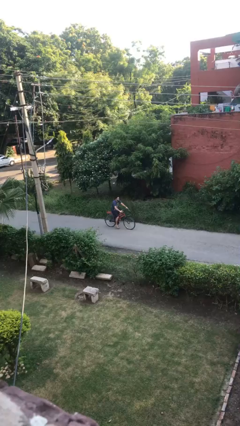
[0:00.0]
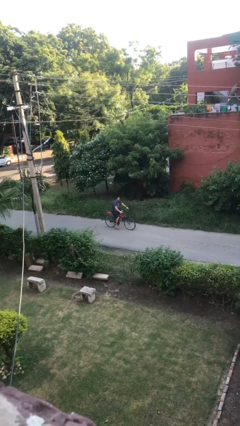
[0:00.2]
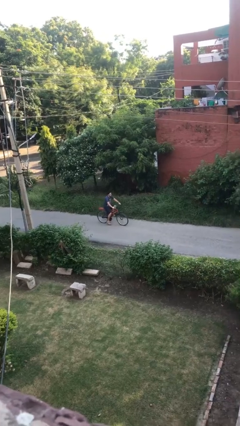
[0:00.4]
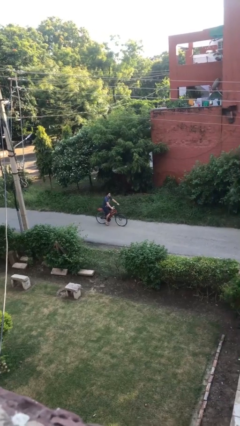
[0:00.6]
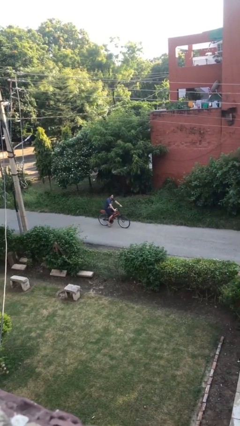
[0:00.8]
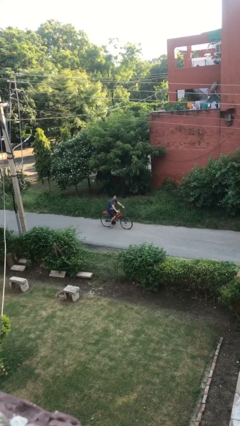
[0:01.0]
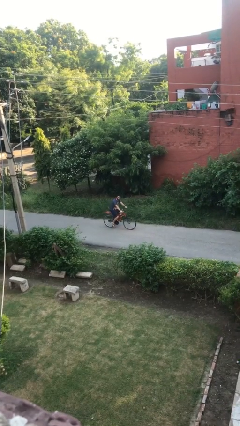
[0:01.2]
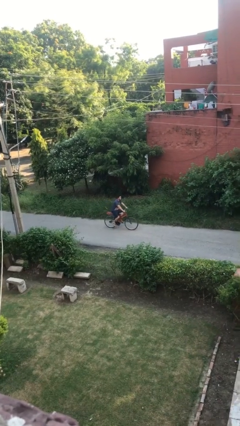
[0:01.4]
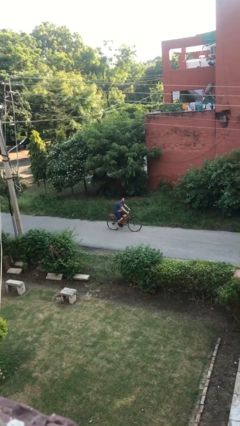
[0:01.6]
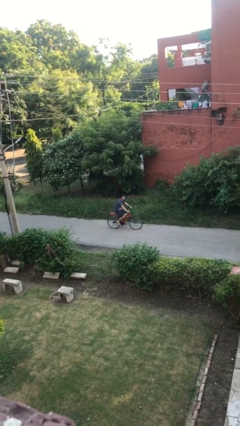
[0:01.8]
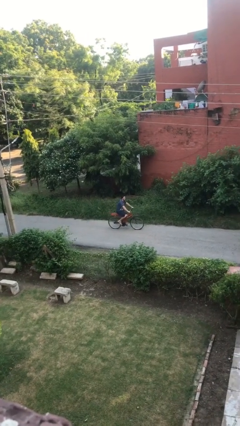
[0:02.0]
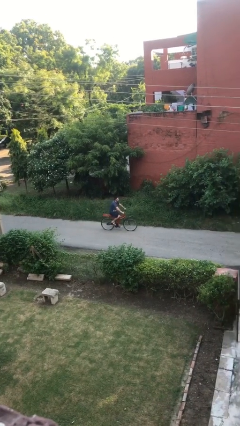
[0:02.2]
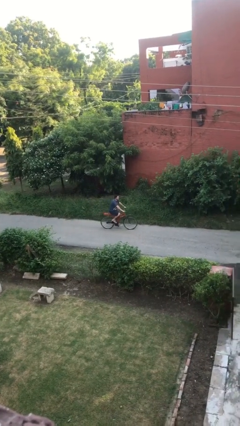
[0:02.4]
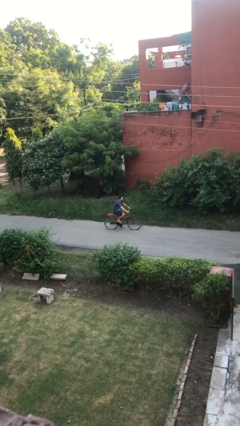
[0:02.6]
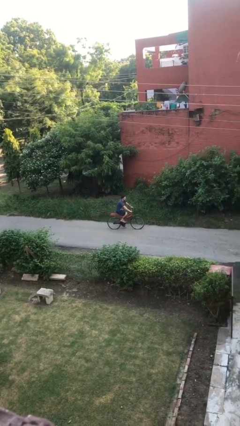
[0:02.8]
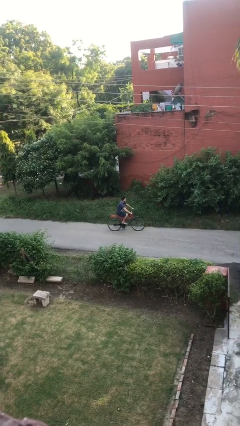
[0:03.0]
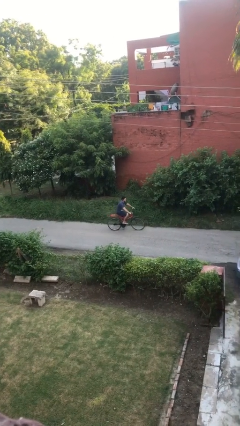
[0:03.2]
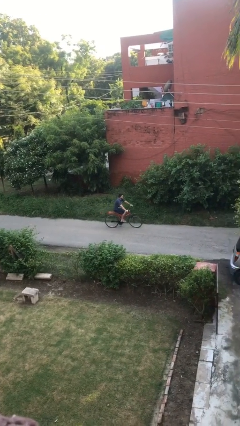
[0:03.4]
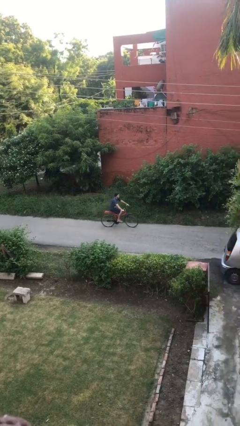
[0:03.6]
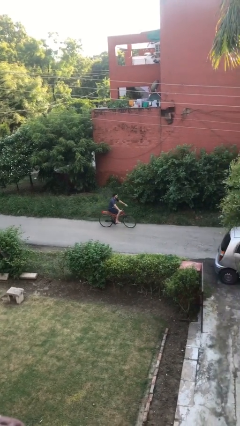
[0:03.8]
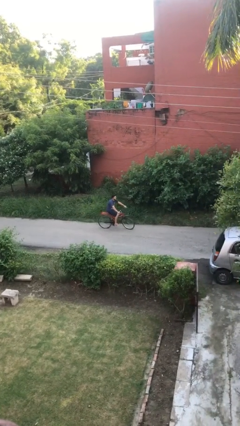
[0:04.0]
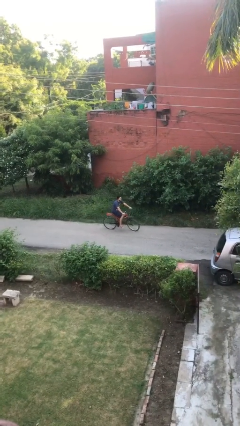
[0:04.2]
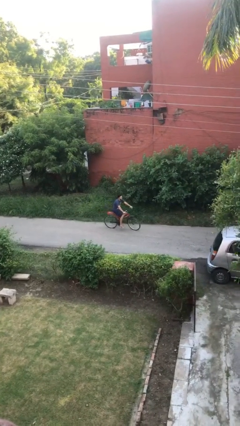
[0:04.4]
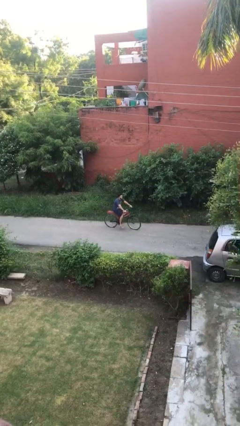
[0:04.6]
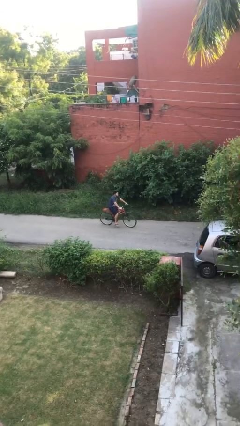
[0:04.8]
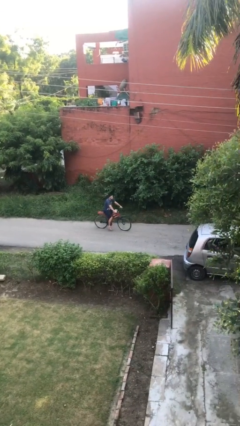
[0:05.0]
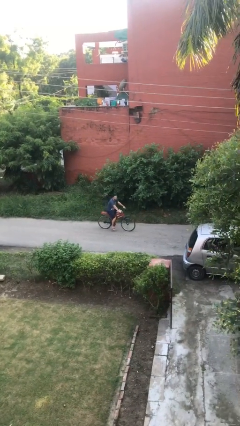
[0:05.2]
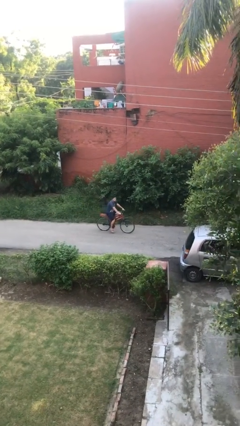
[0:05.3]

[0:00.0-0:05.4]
person rides bicycle

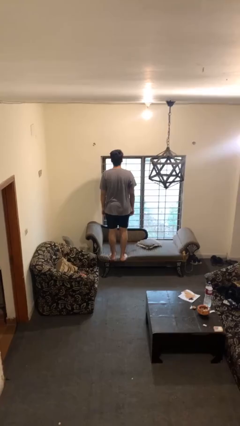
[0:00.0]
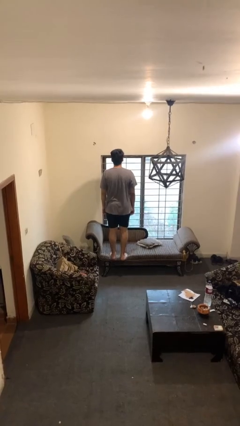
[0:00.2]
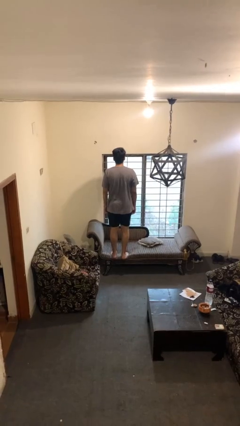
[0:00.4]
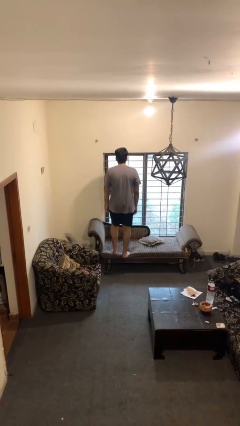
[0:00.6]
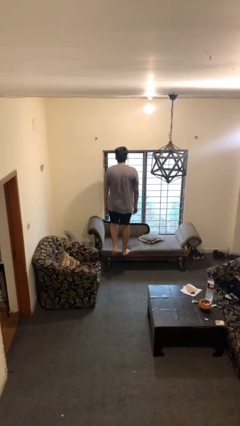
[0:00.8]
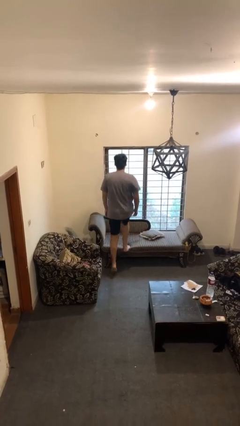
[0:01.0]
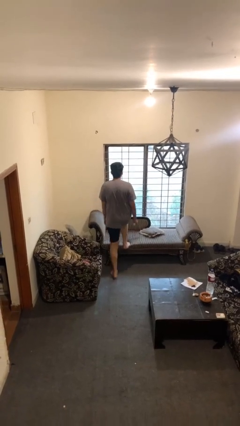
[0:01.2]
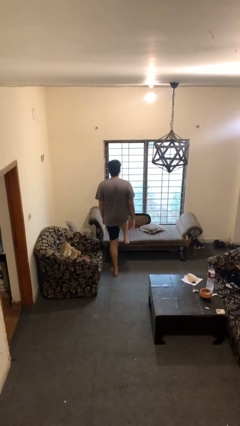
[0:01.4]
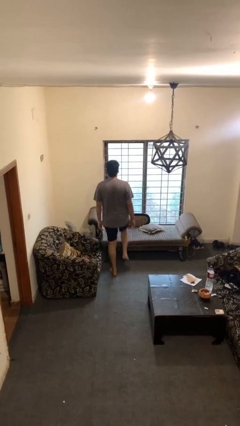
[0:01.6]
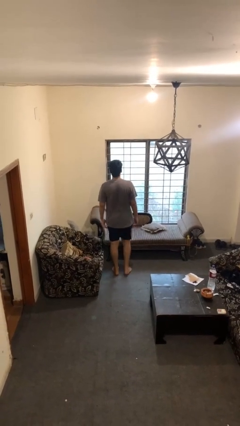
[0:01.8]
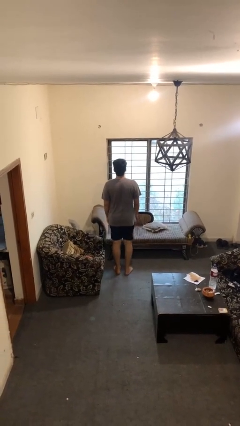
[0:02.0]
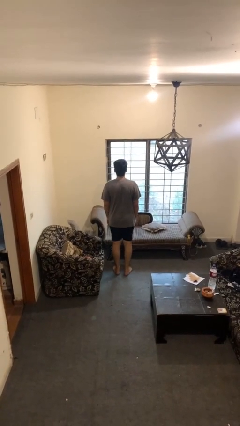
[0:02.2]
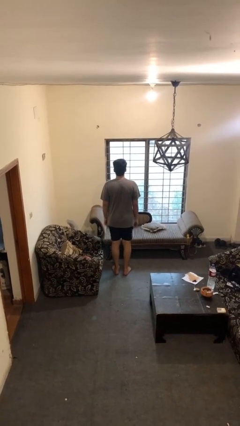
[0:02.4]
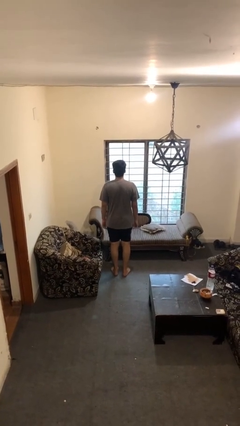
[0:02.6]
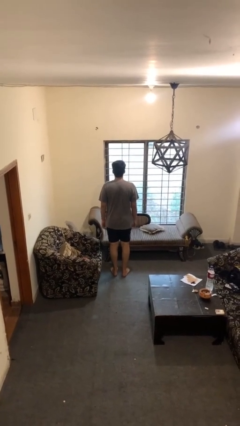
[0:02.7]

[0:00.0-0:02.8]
person climbs off couch

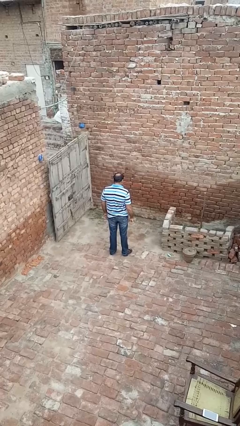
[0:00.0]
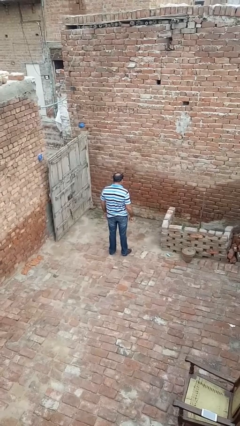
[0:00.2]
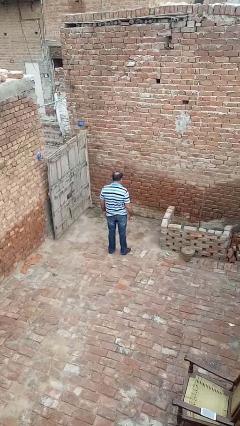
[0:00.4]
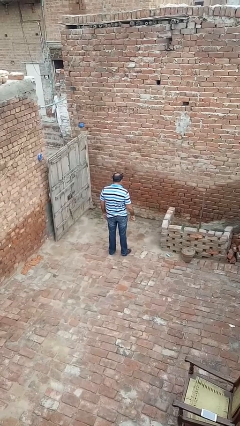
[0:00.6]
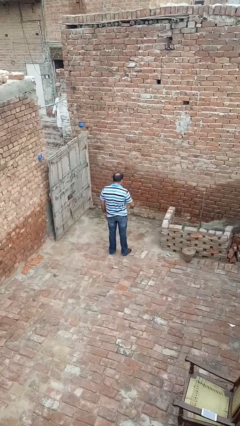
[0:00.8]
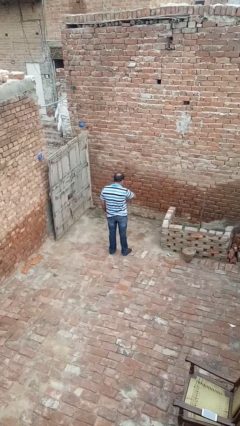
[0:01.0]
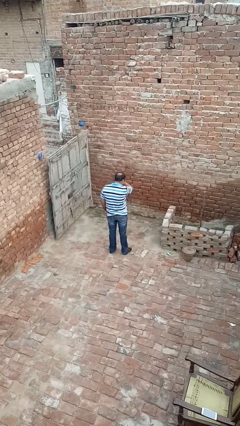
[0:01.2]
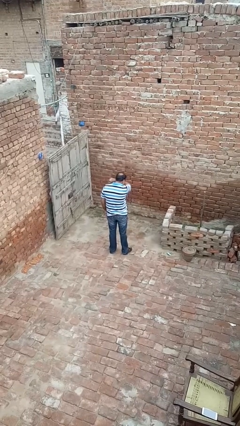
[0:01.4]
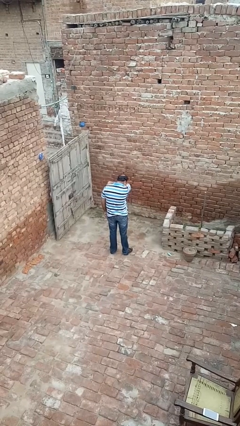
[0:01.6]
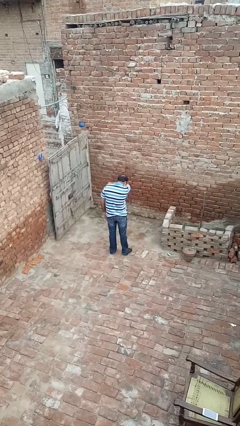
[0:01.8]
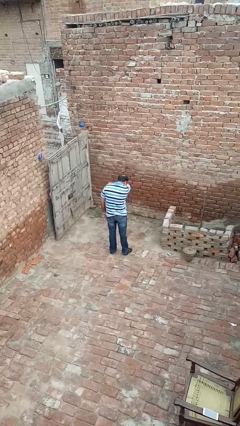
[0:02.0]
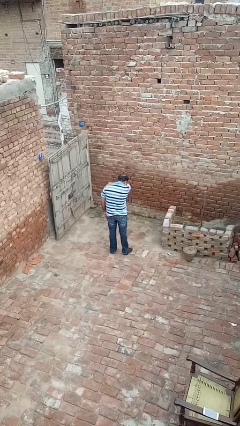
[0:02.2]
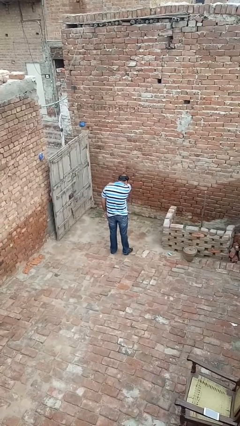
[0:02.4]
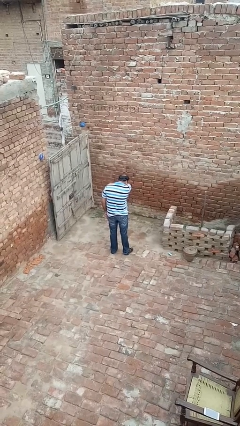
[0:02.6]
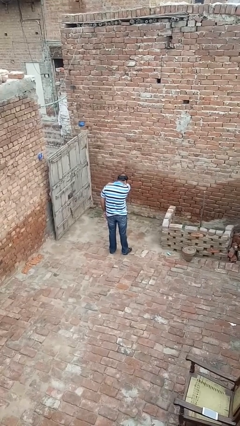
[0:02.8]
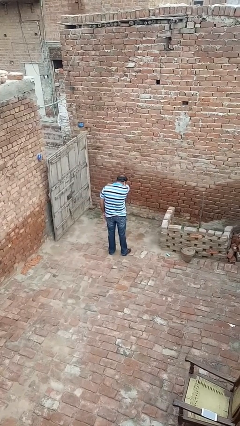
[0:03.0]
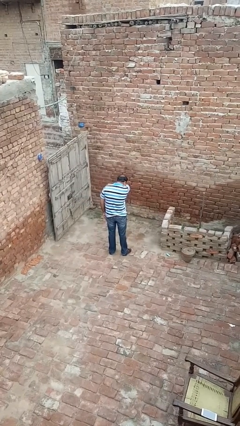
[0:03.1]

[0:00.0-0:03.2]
person sneezes into arm

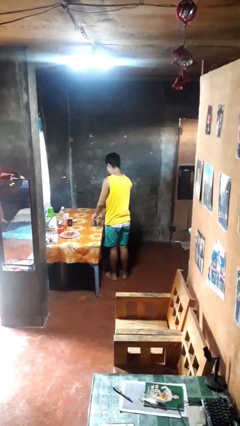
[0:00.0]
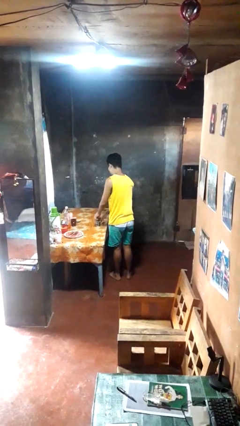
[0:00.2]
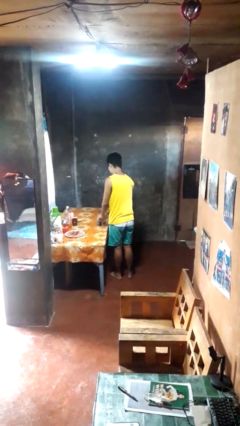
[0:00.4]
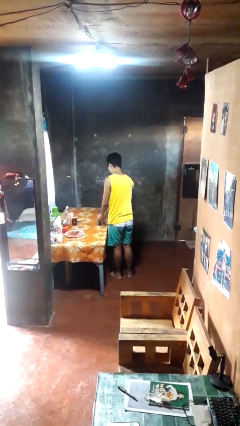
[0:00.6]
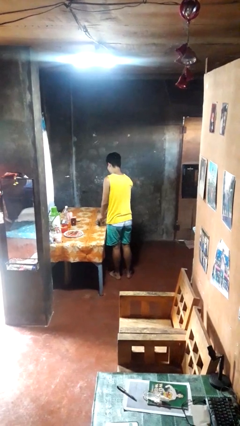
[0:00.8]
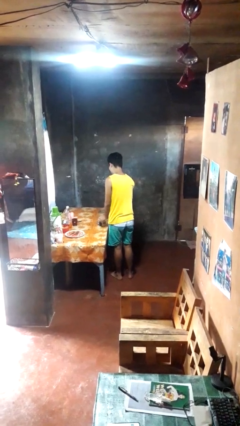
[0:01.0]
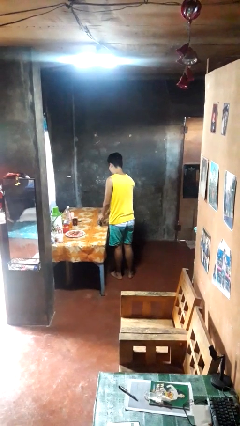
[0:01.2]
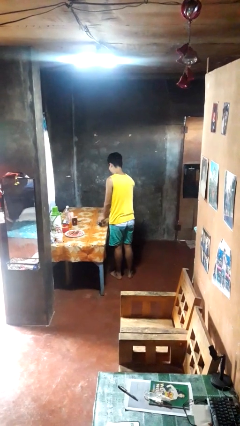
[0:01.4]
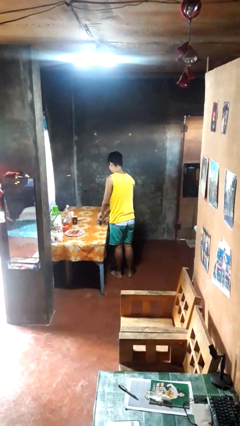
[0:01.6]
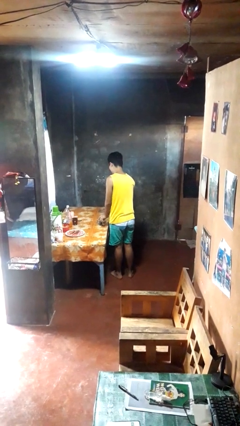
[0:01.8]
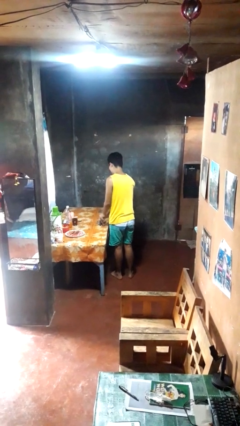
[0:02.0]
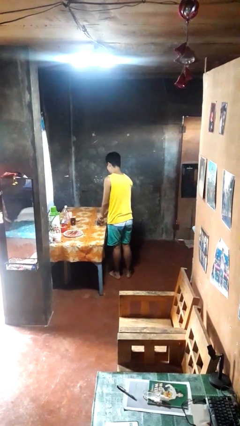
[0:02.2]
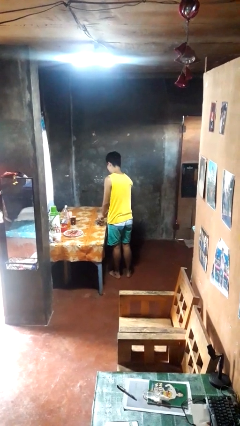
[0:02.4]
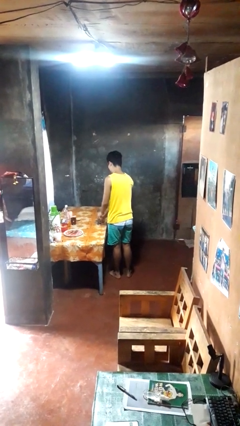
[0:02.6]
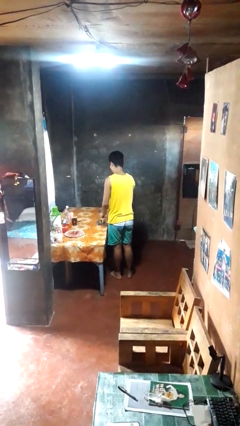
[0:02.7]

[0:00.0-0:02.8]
person opens can with can opener

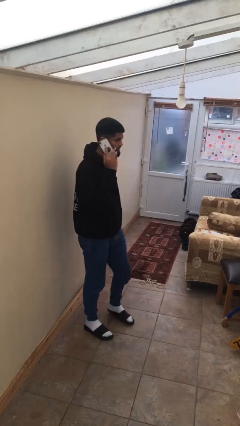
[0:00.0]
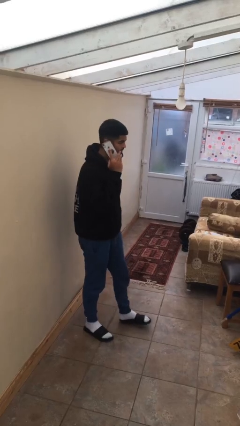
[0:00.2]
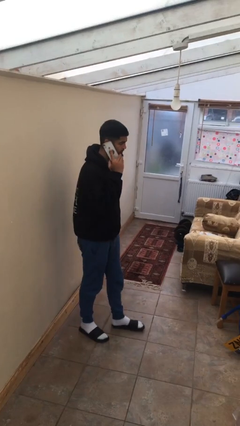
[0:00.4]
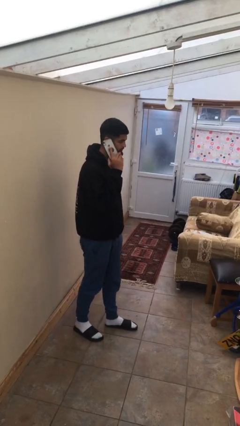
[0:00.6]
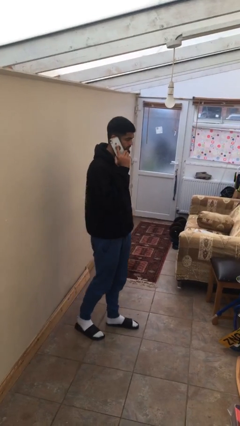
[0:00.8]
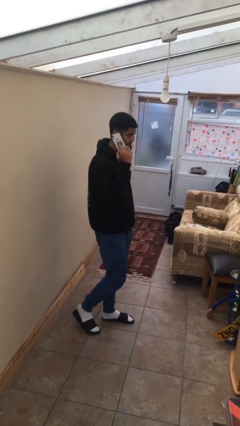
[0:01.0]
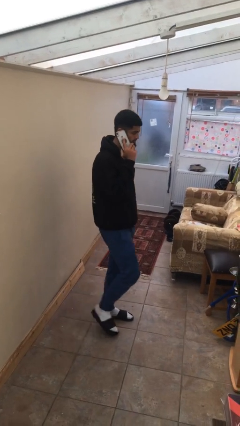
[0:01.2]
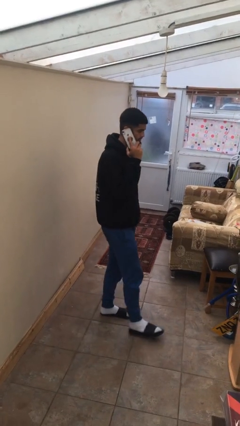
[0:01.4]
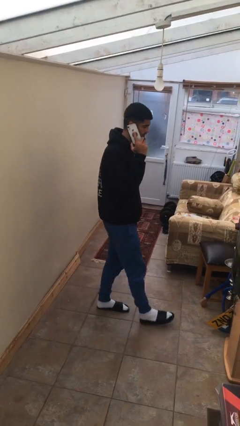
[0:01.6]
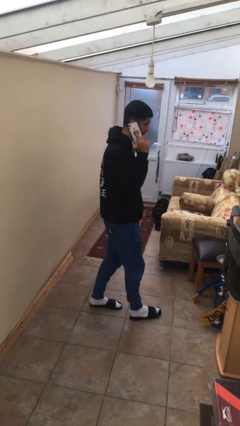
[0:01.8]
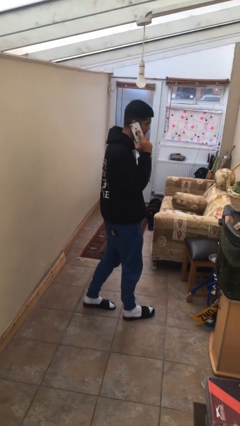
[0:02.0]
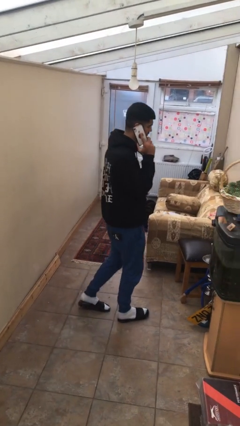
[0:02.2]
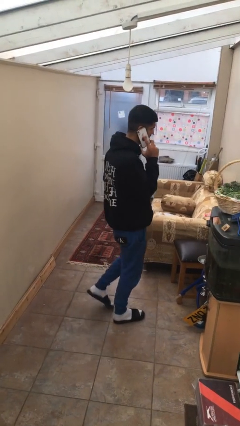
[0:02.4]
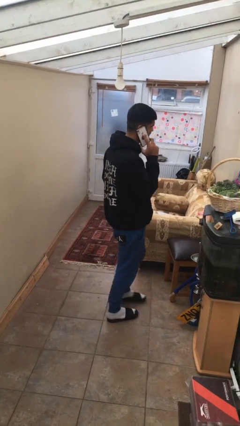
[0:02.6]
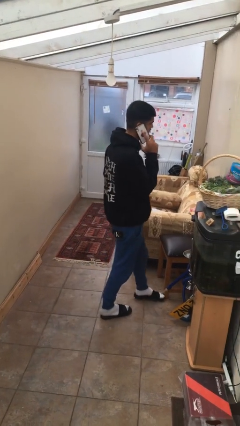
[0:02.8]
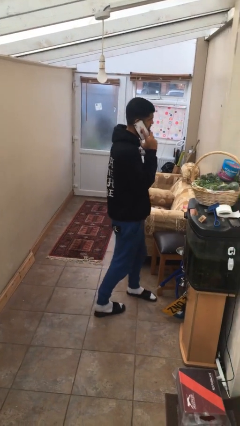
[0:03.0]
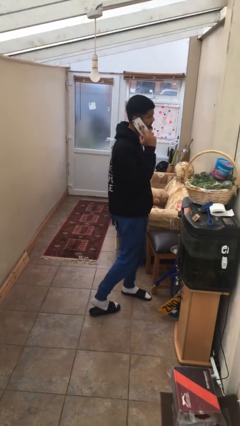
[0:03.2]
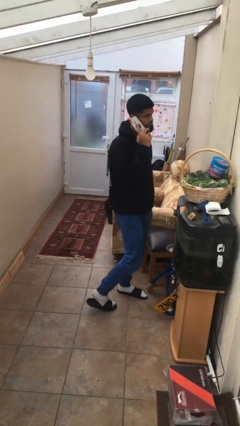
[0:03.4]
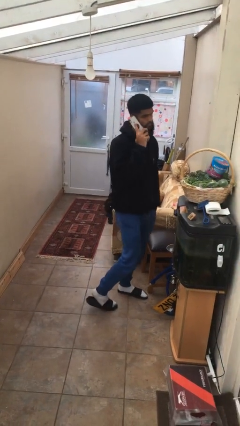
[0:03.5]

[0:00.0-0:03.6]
person talks on phone
